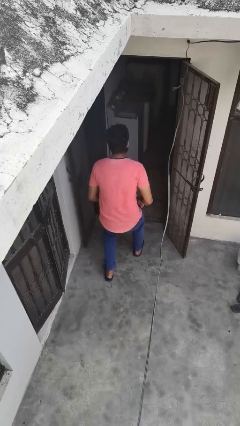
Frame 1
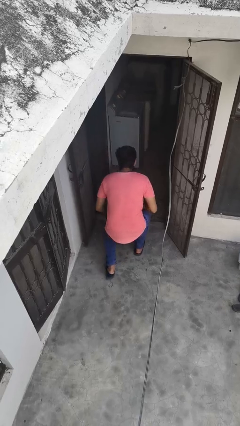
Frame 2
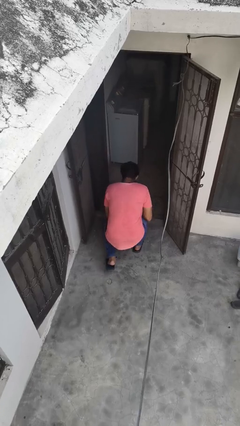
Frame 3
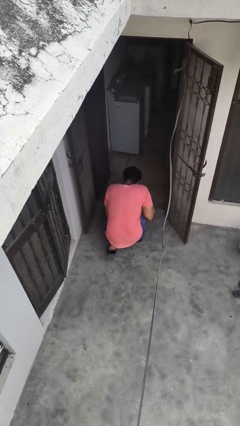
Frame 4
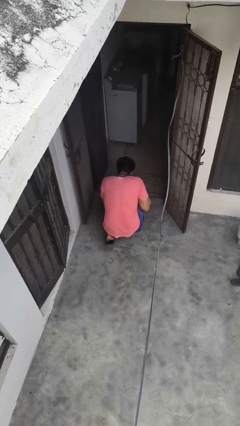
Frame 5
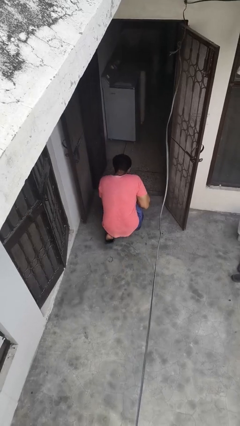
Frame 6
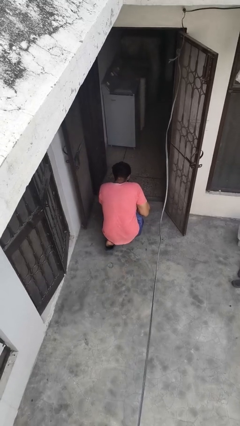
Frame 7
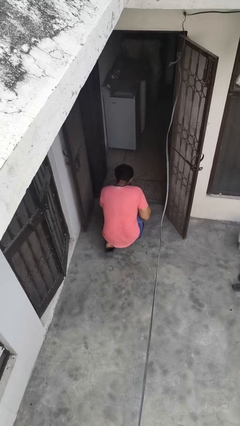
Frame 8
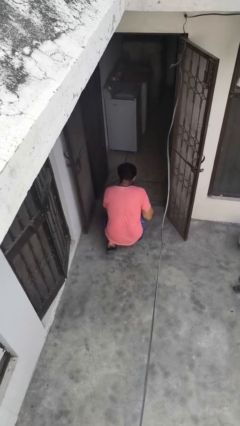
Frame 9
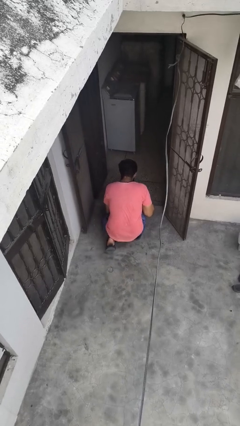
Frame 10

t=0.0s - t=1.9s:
person trips on object on floor

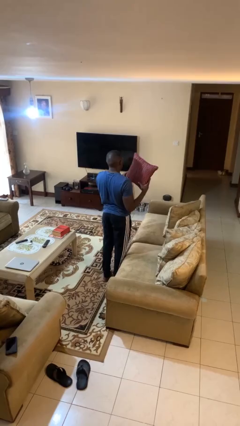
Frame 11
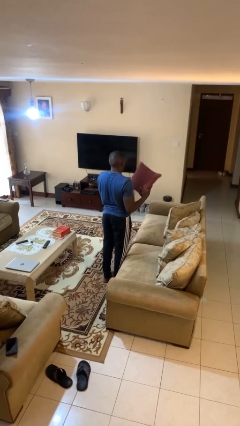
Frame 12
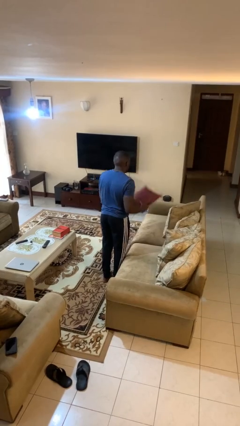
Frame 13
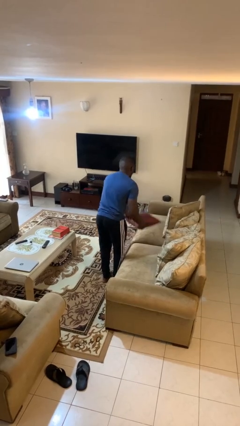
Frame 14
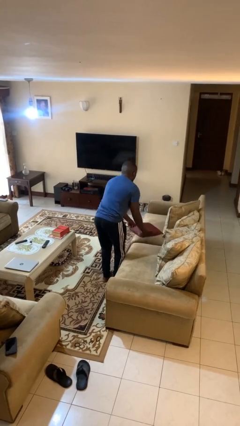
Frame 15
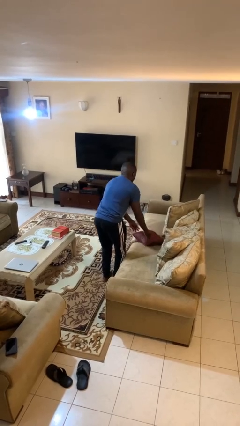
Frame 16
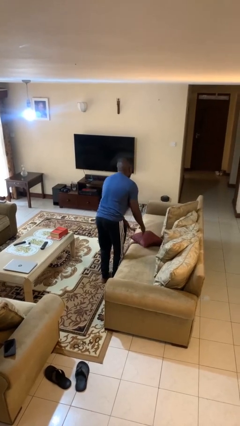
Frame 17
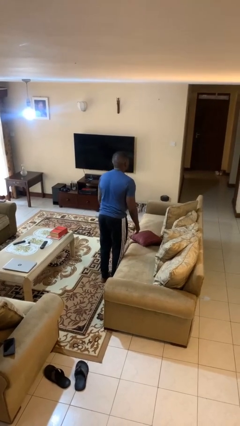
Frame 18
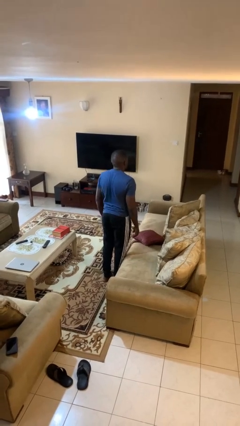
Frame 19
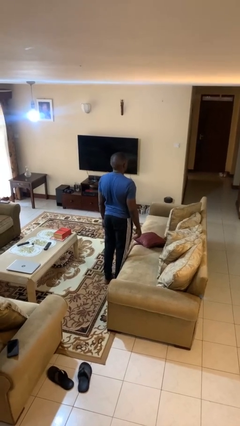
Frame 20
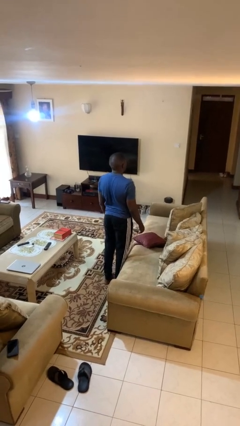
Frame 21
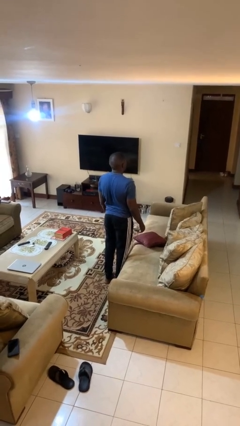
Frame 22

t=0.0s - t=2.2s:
person puts down object on couch

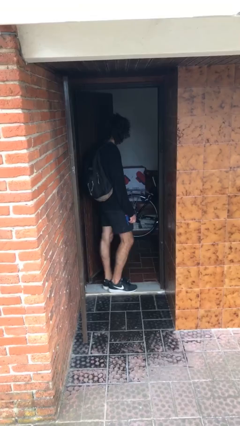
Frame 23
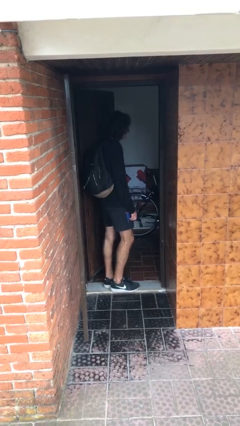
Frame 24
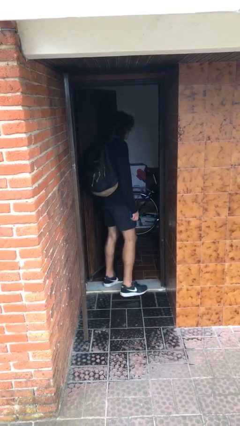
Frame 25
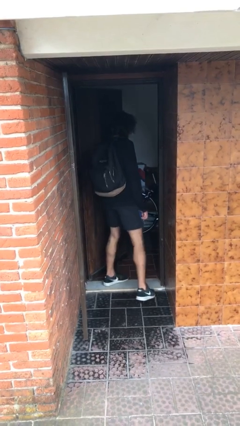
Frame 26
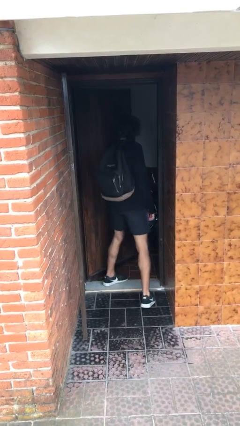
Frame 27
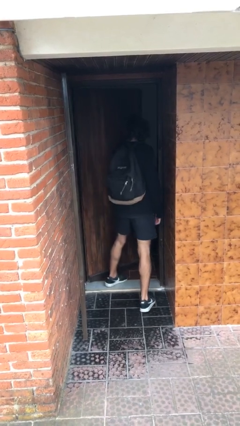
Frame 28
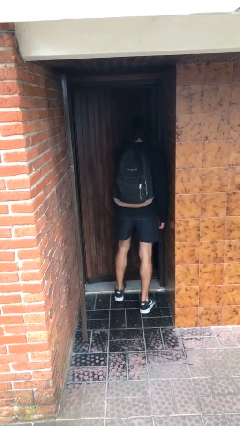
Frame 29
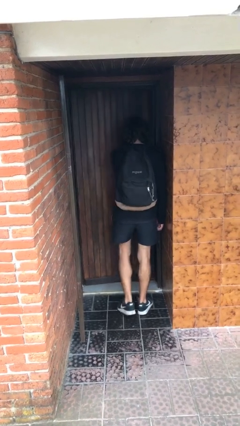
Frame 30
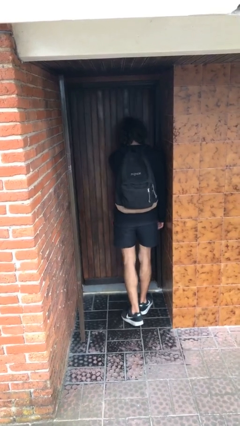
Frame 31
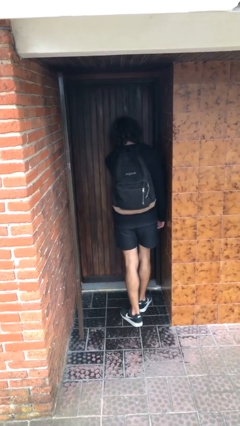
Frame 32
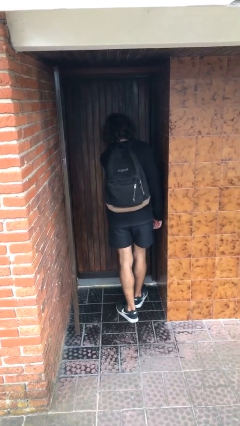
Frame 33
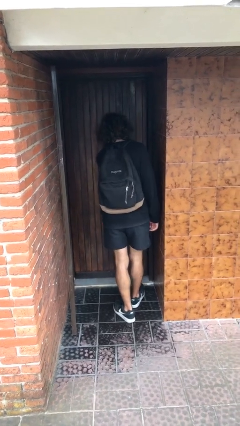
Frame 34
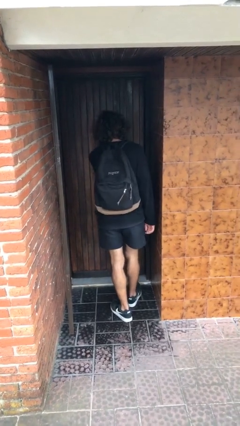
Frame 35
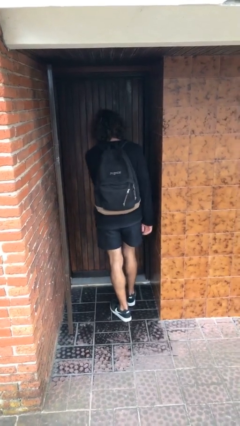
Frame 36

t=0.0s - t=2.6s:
person closes facility door

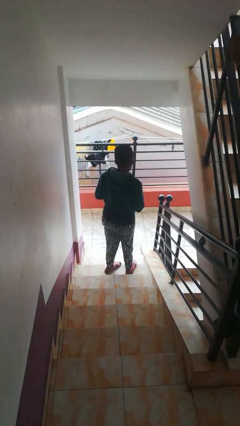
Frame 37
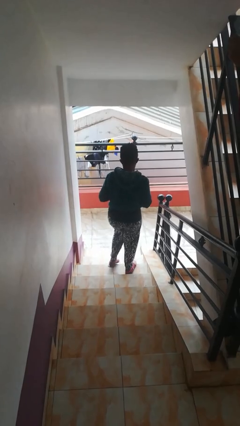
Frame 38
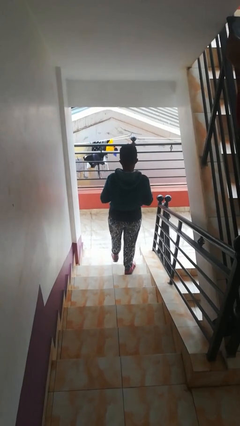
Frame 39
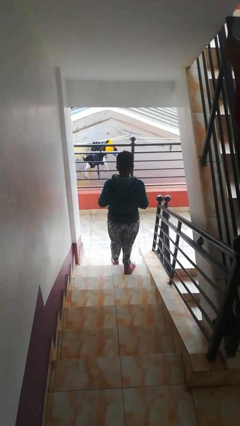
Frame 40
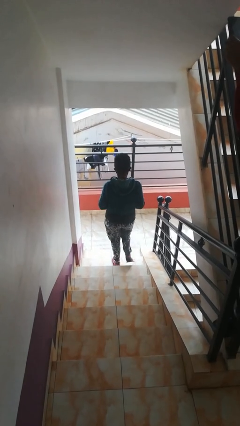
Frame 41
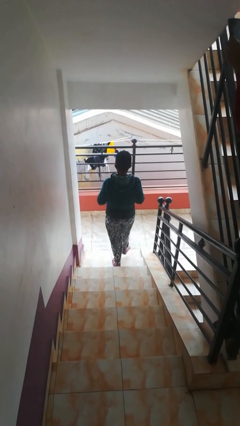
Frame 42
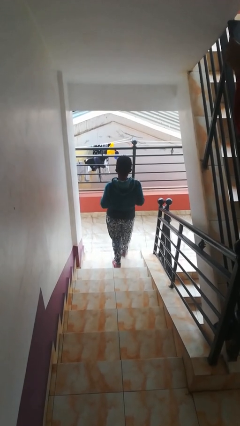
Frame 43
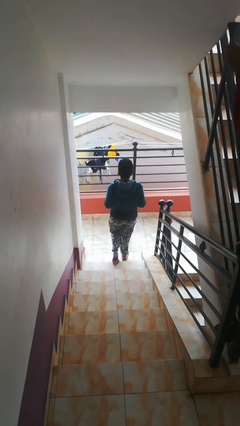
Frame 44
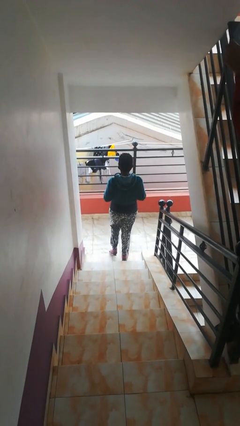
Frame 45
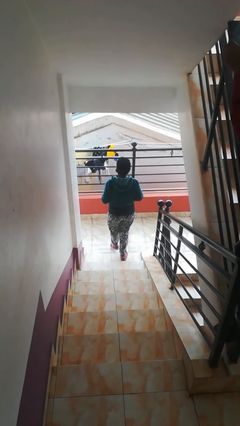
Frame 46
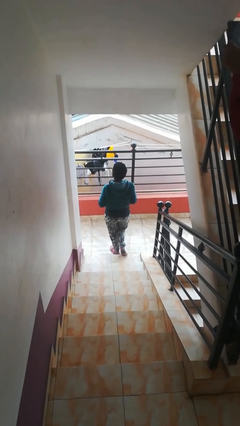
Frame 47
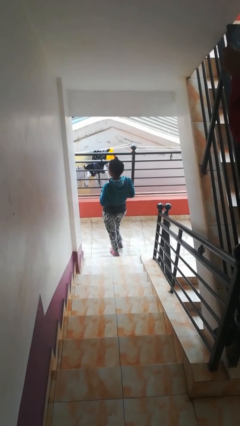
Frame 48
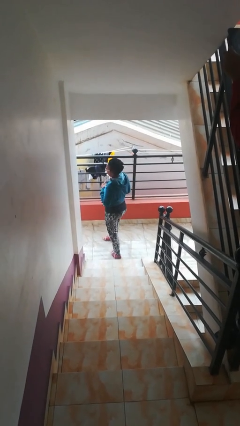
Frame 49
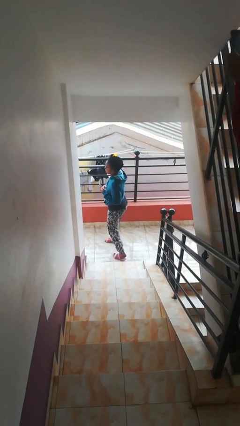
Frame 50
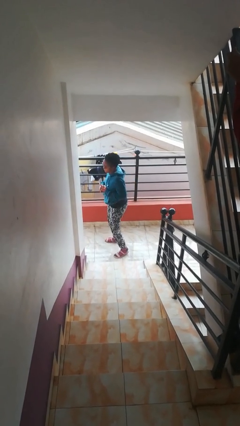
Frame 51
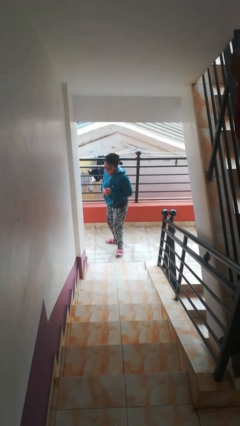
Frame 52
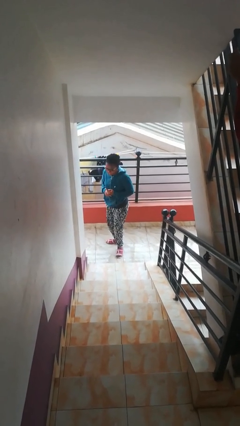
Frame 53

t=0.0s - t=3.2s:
person climbs down stairs

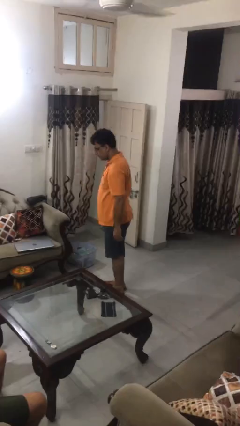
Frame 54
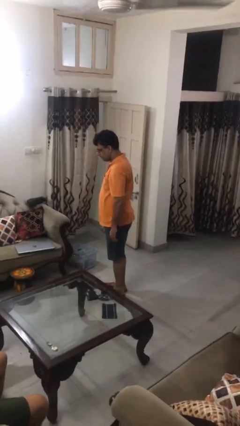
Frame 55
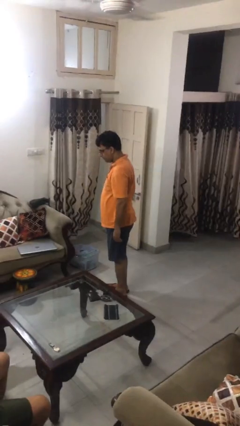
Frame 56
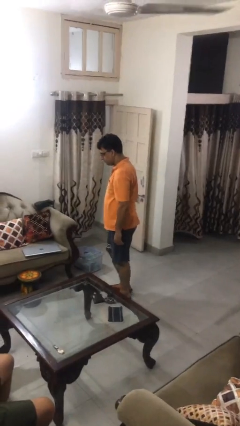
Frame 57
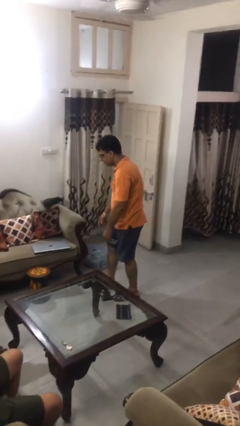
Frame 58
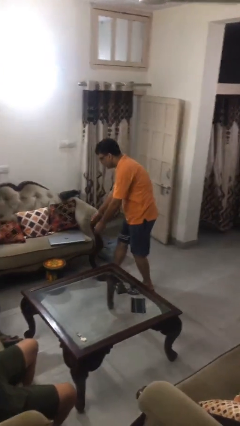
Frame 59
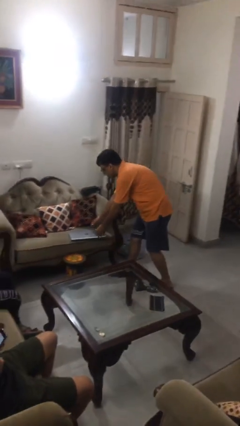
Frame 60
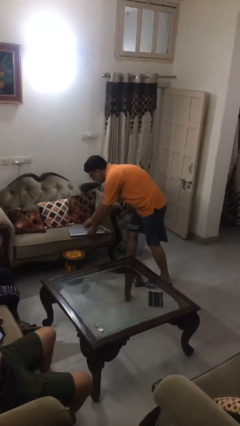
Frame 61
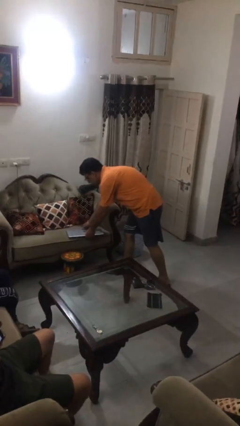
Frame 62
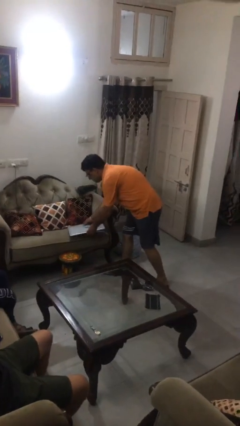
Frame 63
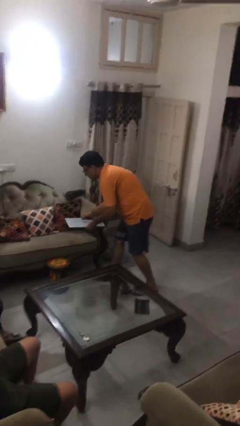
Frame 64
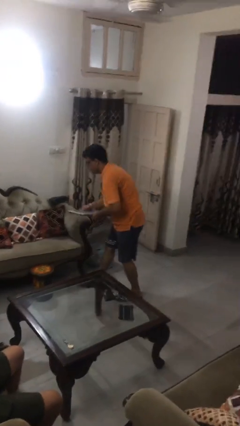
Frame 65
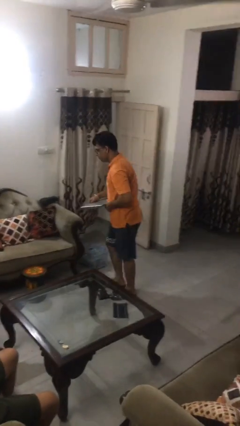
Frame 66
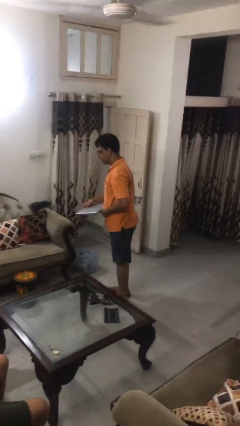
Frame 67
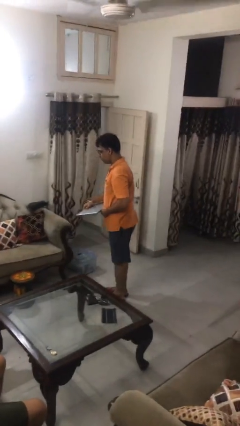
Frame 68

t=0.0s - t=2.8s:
person picks up object from couch

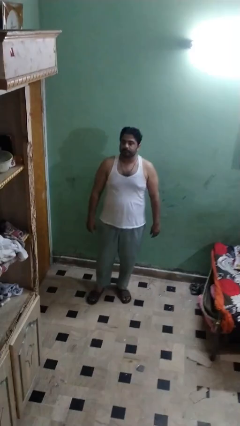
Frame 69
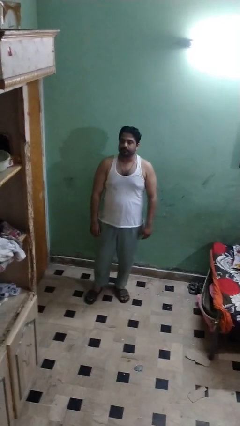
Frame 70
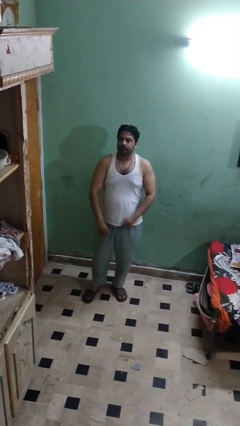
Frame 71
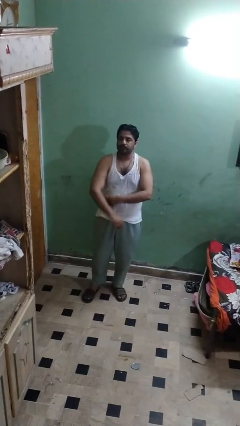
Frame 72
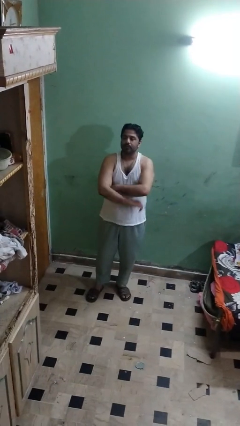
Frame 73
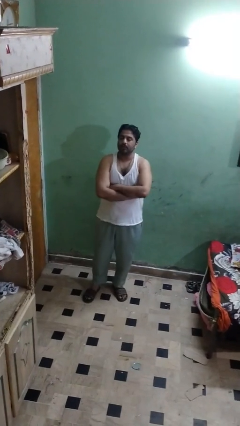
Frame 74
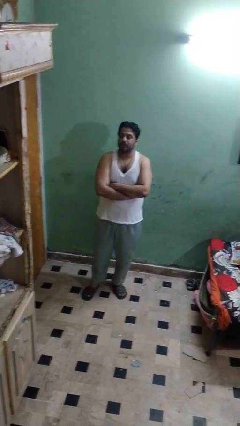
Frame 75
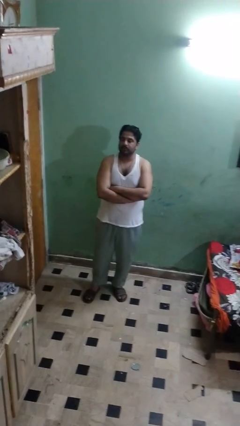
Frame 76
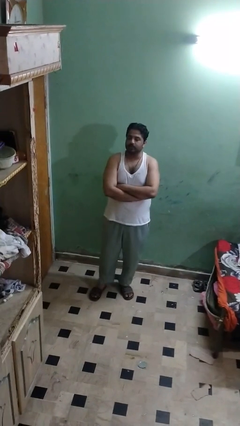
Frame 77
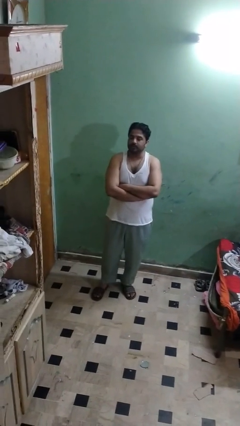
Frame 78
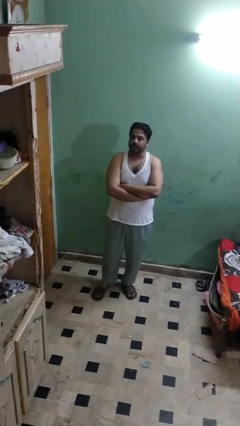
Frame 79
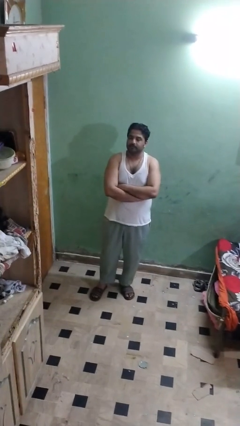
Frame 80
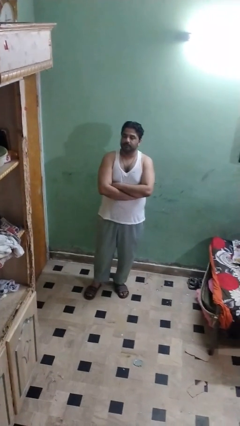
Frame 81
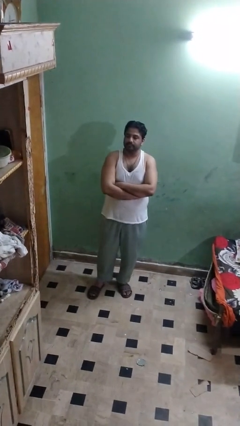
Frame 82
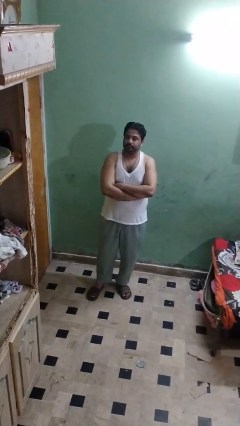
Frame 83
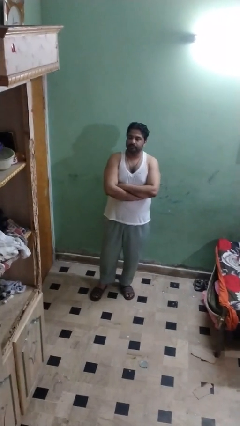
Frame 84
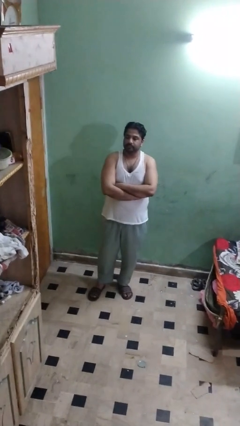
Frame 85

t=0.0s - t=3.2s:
person crosses arms

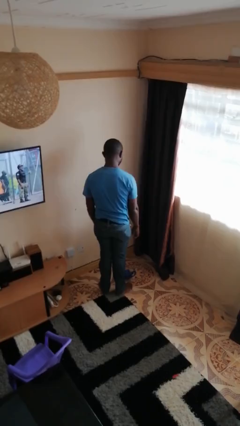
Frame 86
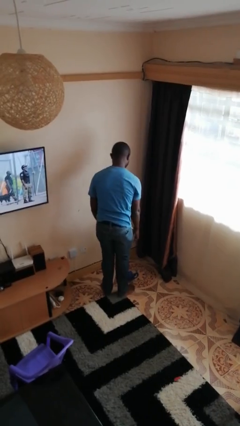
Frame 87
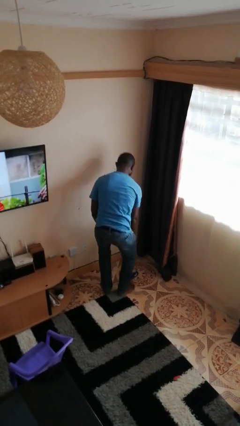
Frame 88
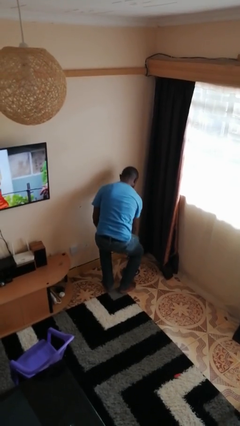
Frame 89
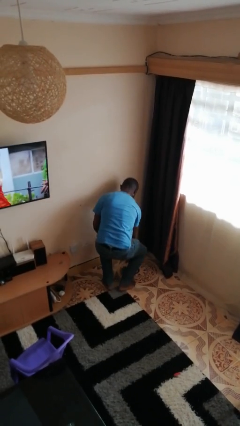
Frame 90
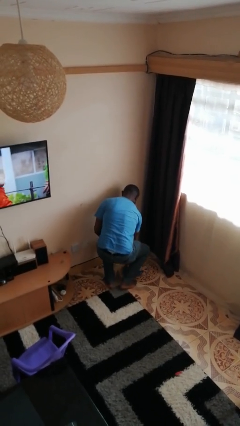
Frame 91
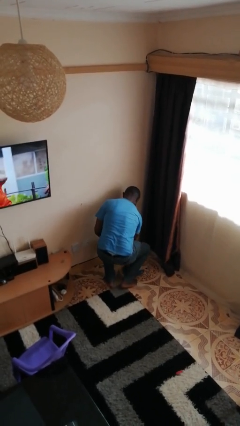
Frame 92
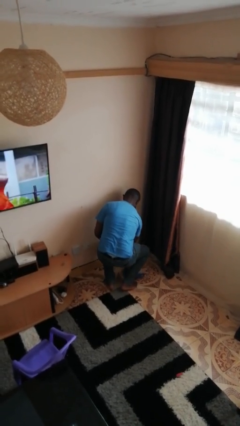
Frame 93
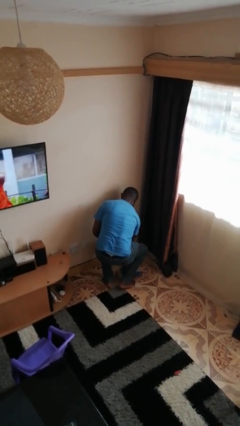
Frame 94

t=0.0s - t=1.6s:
person picks up object from floor
